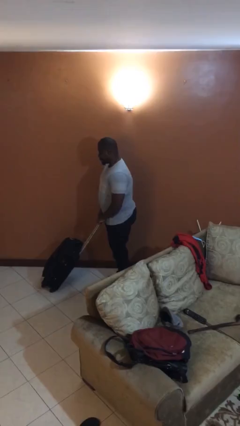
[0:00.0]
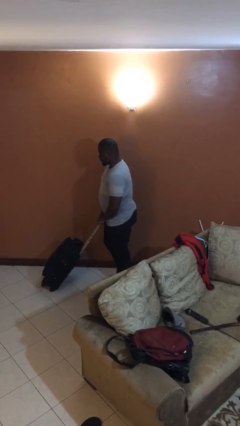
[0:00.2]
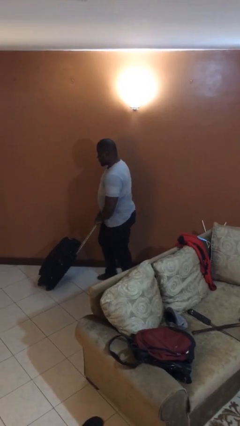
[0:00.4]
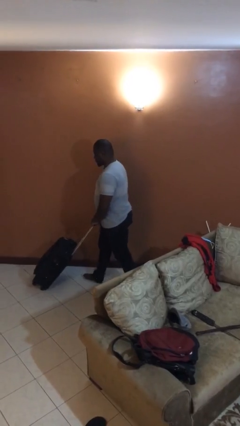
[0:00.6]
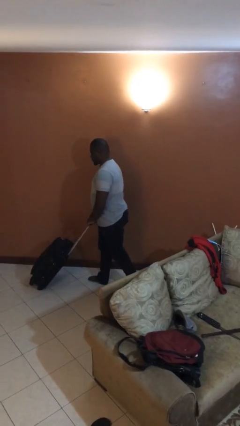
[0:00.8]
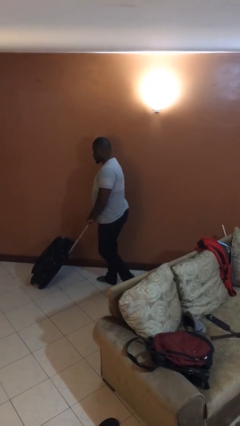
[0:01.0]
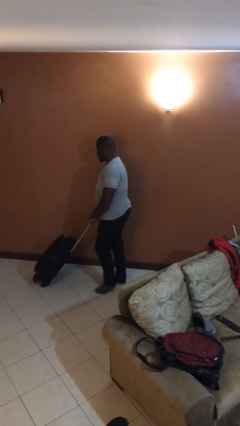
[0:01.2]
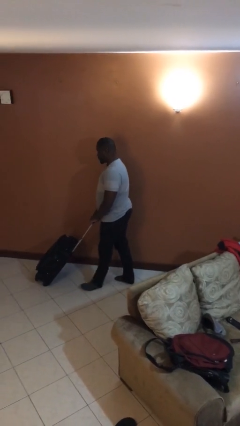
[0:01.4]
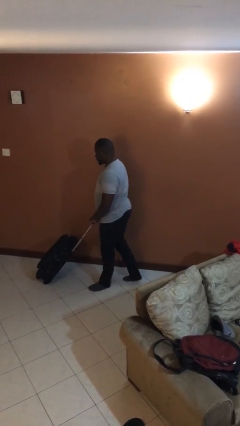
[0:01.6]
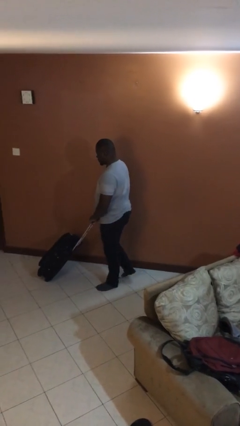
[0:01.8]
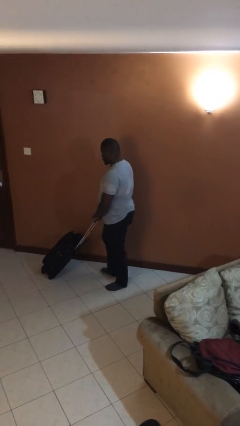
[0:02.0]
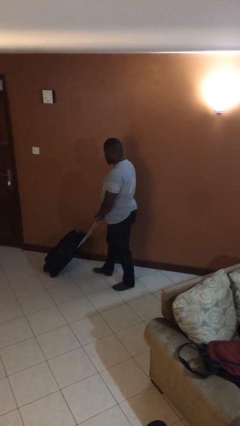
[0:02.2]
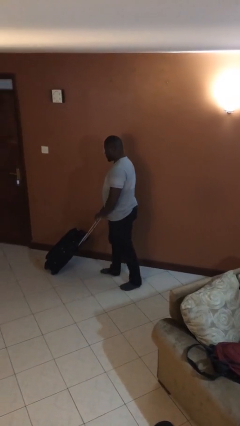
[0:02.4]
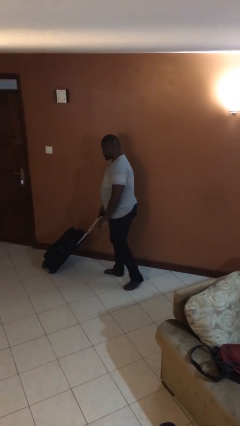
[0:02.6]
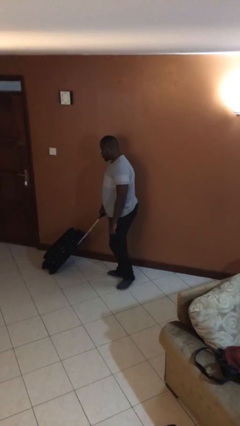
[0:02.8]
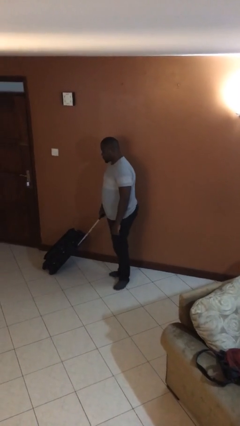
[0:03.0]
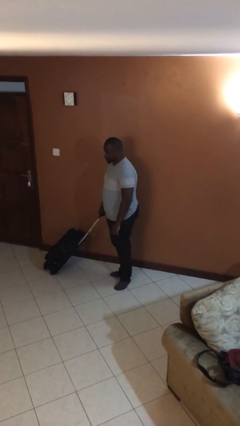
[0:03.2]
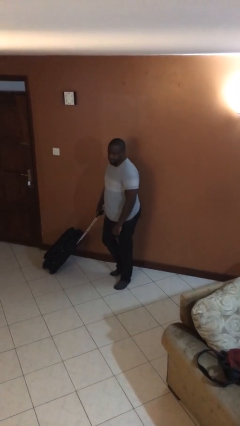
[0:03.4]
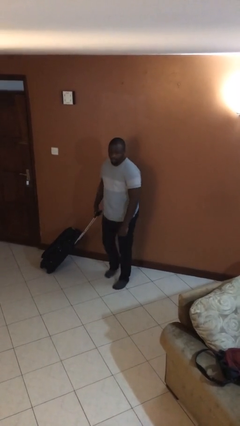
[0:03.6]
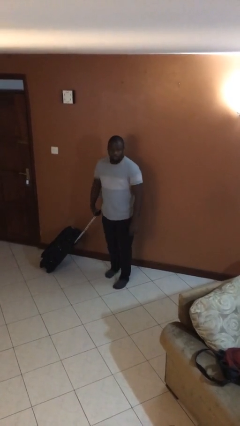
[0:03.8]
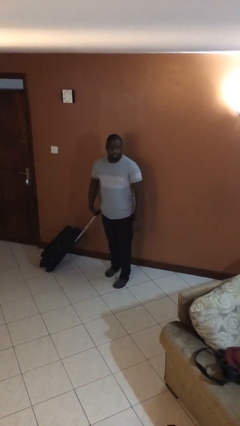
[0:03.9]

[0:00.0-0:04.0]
person pushes wheeled cart

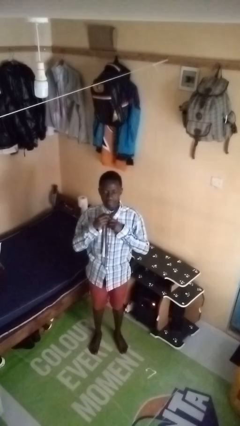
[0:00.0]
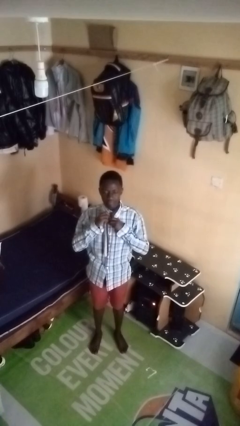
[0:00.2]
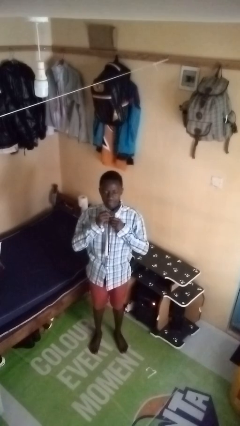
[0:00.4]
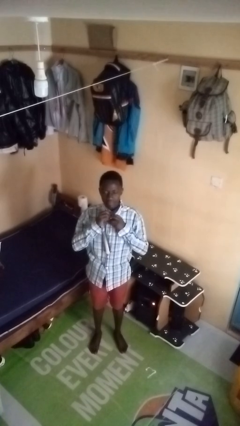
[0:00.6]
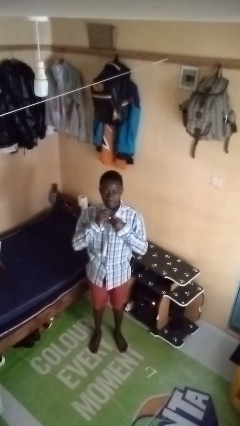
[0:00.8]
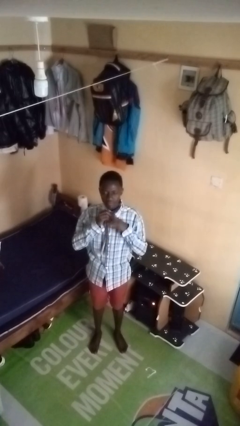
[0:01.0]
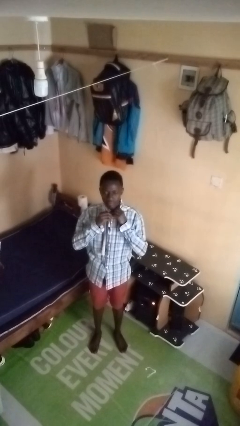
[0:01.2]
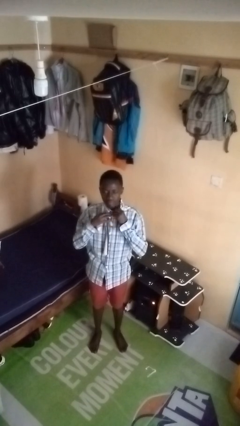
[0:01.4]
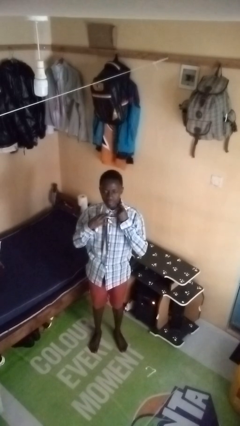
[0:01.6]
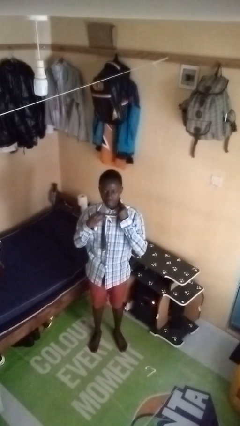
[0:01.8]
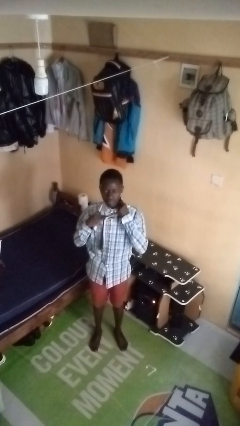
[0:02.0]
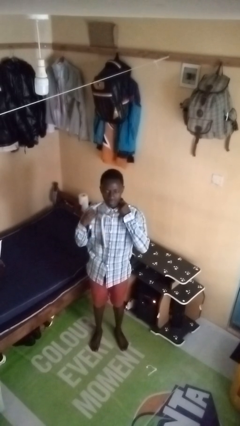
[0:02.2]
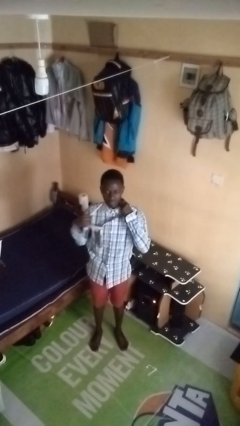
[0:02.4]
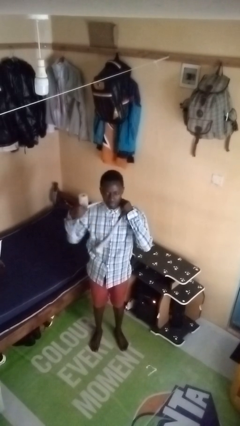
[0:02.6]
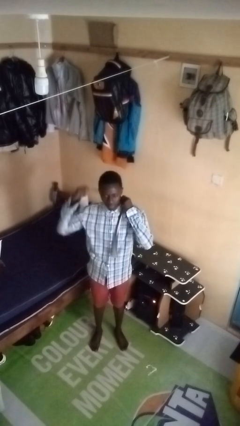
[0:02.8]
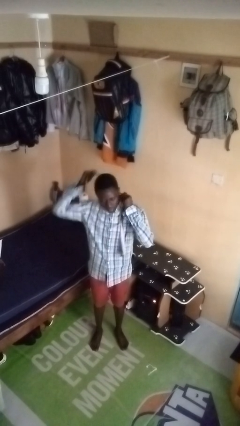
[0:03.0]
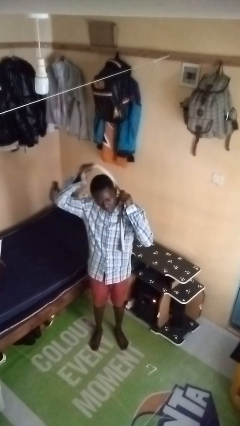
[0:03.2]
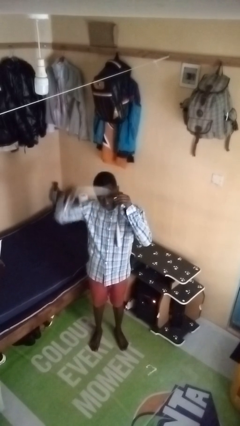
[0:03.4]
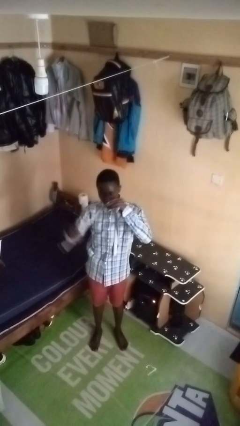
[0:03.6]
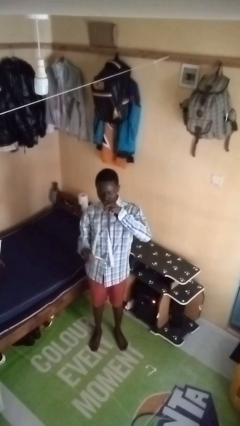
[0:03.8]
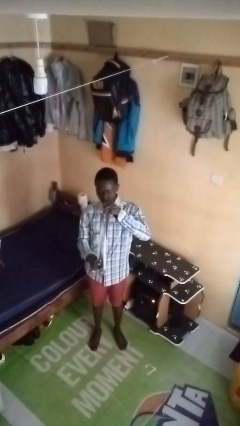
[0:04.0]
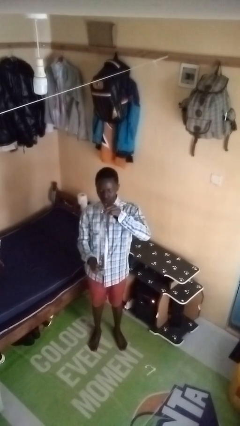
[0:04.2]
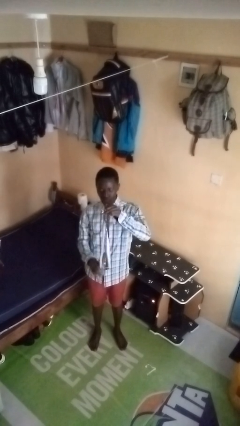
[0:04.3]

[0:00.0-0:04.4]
person takes off necktie

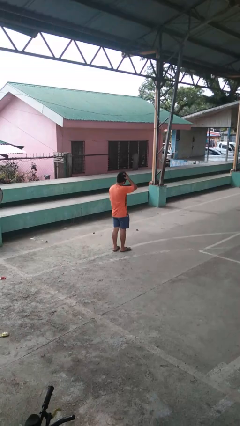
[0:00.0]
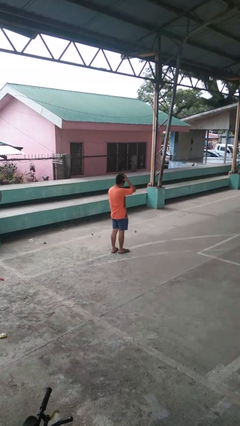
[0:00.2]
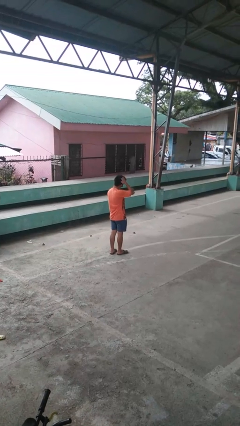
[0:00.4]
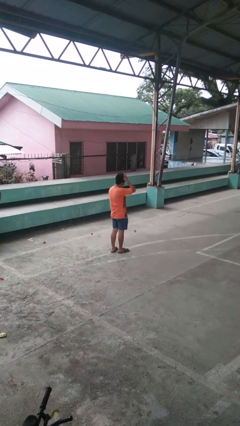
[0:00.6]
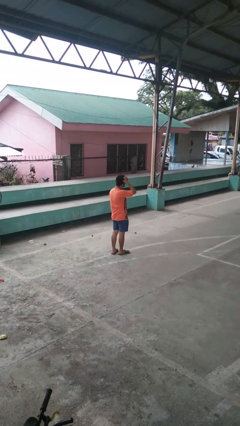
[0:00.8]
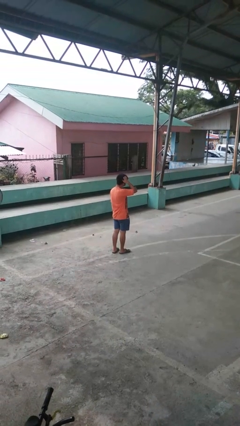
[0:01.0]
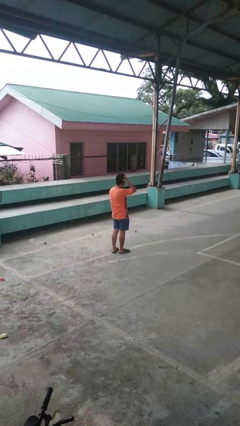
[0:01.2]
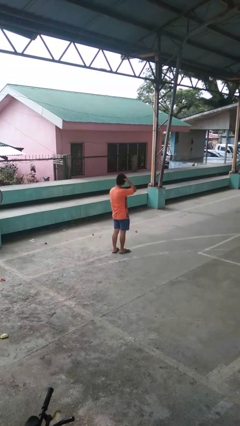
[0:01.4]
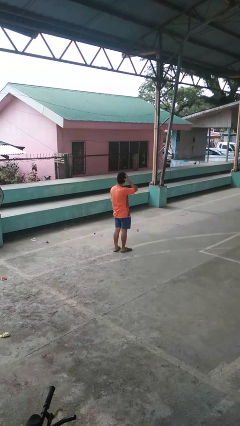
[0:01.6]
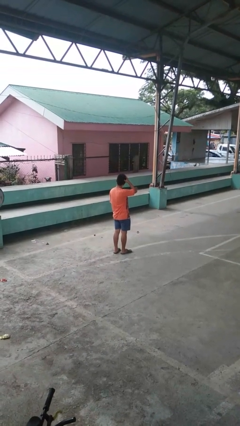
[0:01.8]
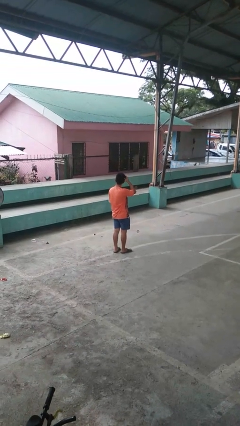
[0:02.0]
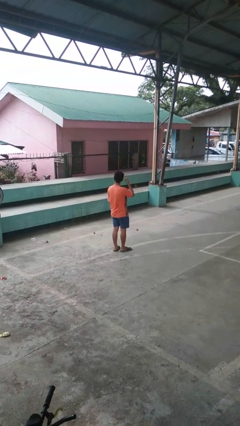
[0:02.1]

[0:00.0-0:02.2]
person scratches face

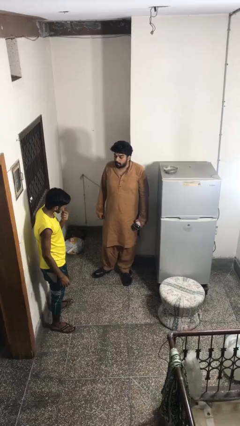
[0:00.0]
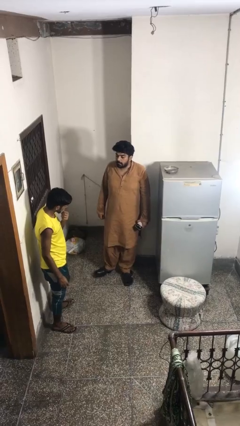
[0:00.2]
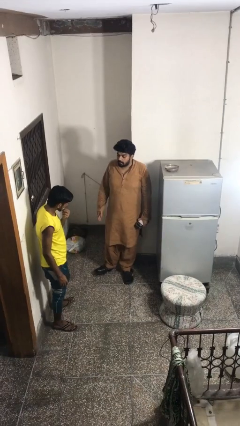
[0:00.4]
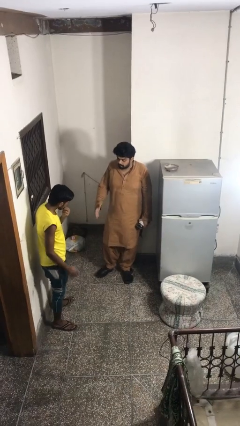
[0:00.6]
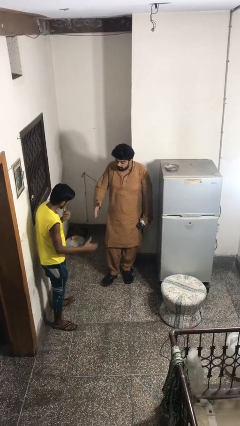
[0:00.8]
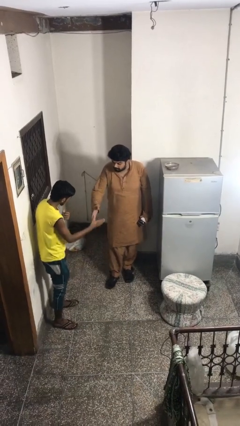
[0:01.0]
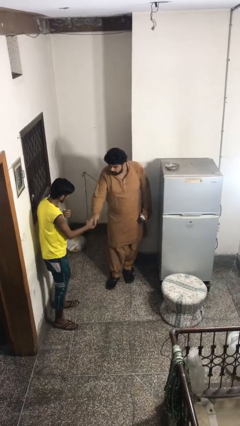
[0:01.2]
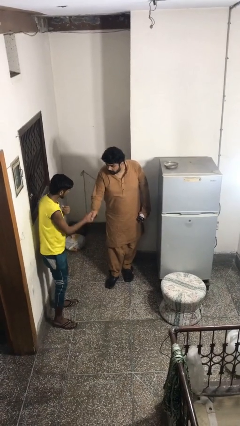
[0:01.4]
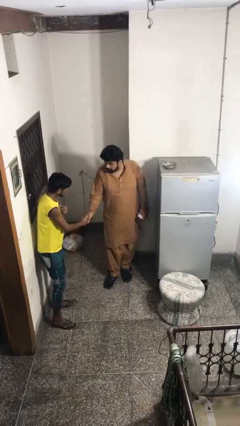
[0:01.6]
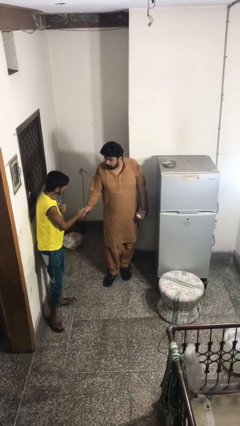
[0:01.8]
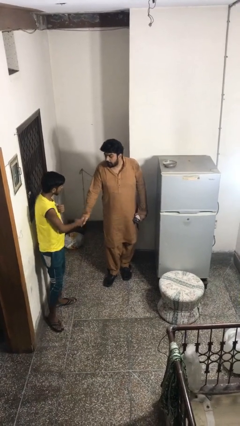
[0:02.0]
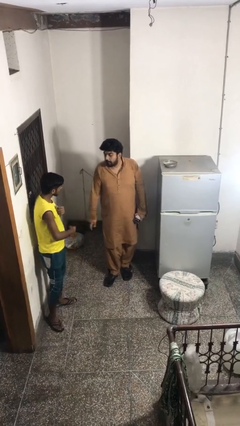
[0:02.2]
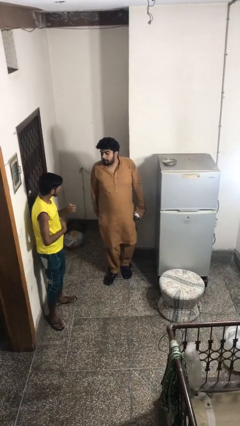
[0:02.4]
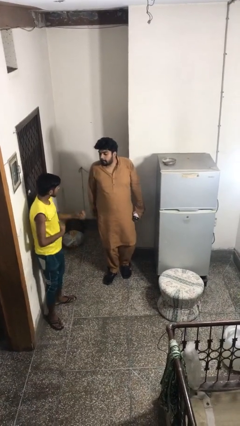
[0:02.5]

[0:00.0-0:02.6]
person shakes hand

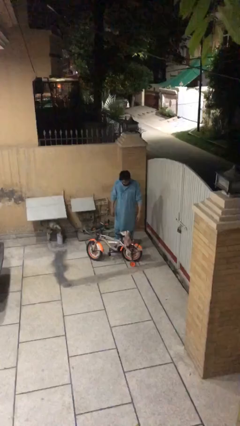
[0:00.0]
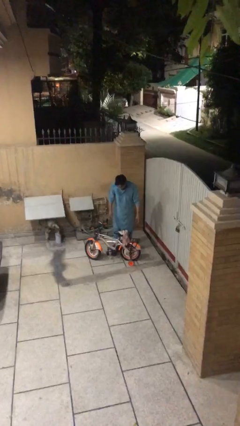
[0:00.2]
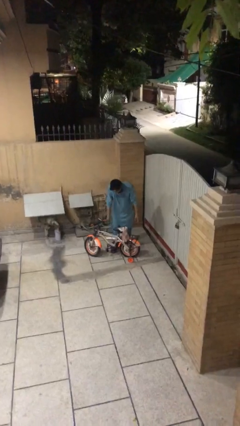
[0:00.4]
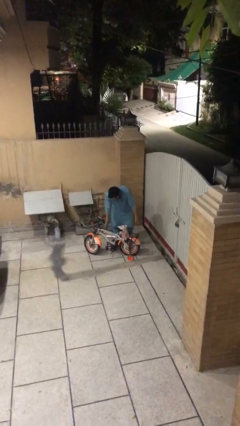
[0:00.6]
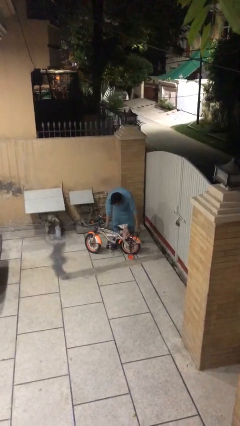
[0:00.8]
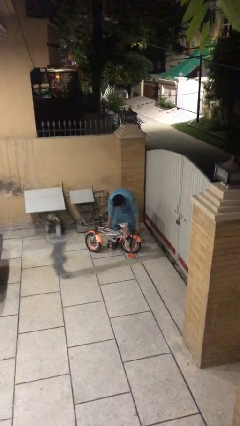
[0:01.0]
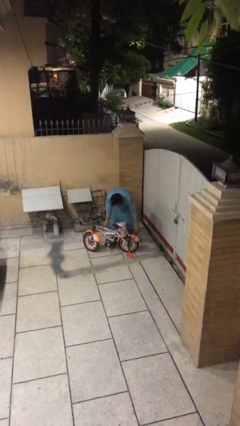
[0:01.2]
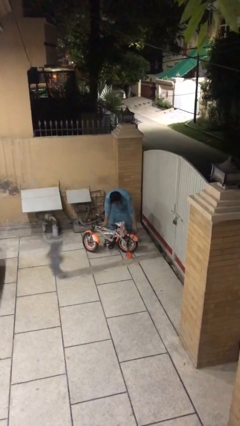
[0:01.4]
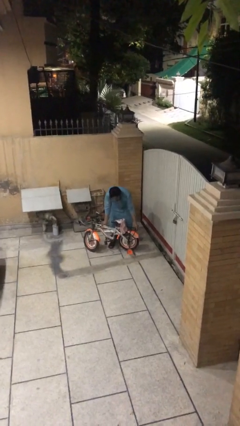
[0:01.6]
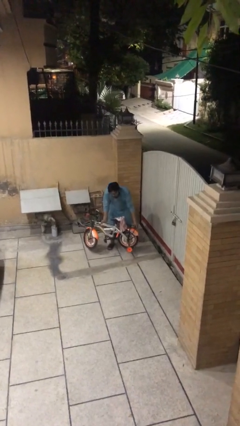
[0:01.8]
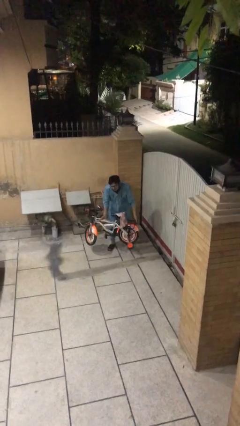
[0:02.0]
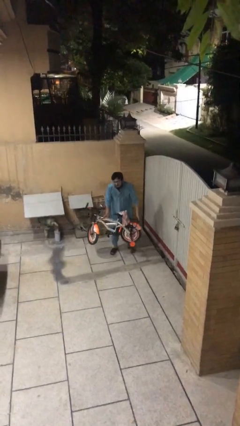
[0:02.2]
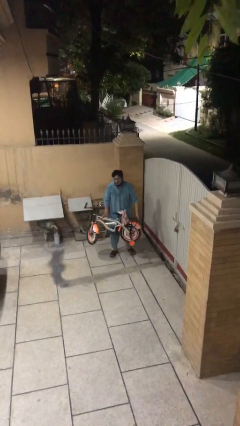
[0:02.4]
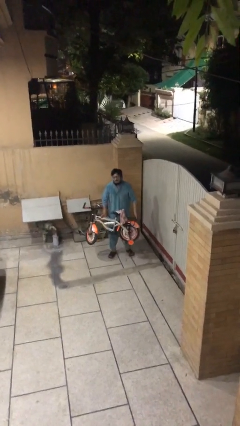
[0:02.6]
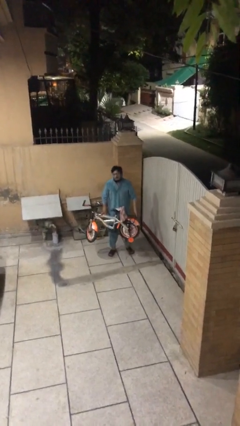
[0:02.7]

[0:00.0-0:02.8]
person picks up object from floor

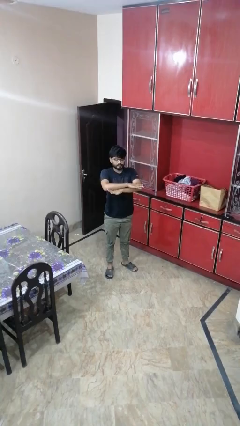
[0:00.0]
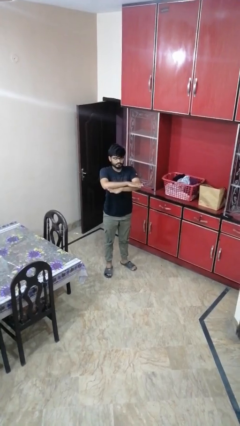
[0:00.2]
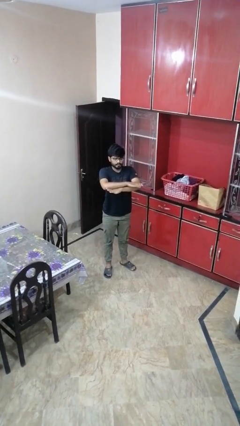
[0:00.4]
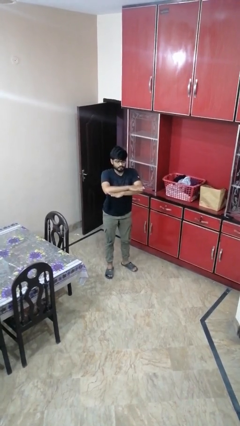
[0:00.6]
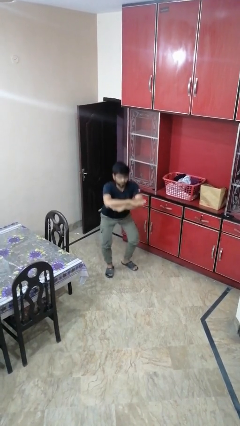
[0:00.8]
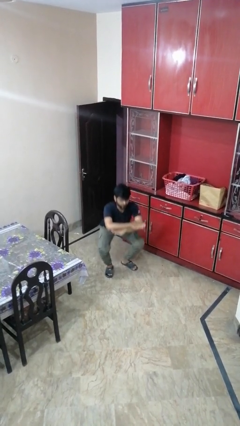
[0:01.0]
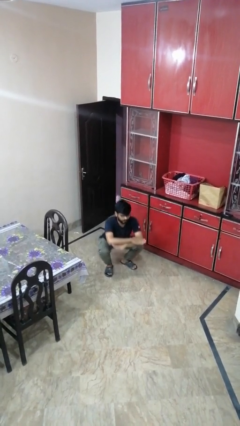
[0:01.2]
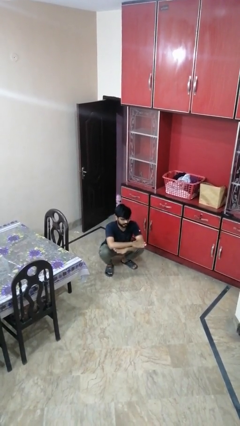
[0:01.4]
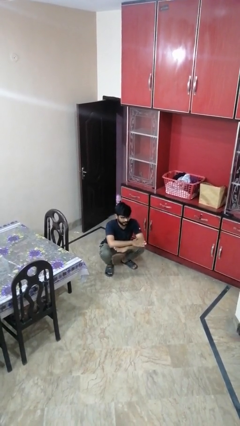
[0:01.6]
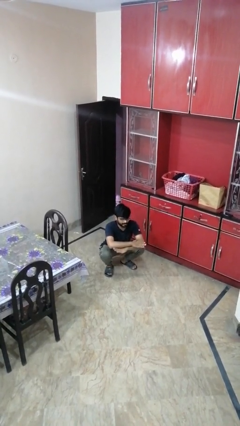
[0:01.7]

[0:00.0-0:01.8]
person squats
